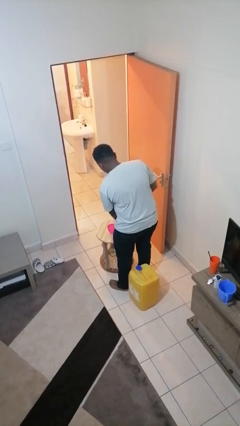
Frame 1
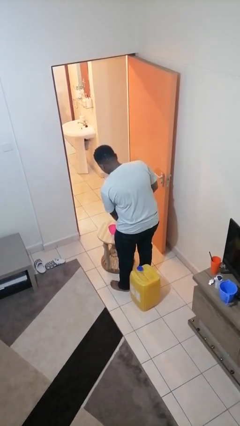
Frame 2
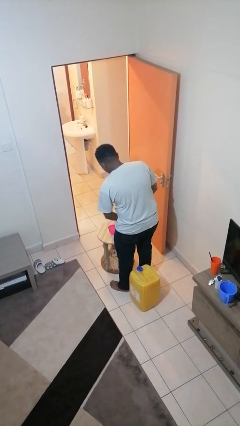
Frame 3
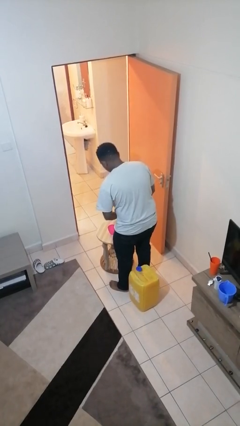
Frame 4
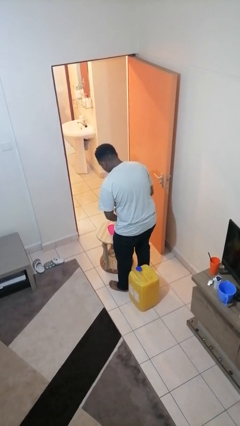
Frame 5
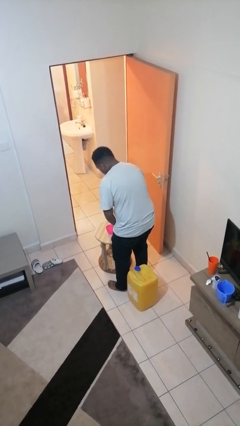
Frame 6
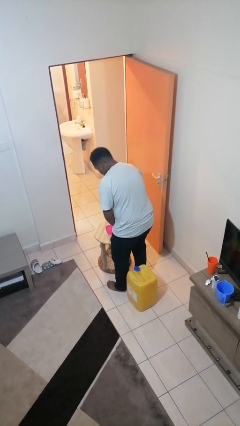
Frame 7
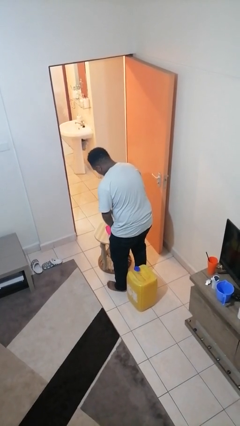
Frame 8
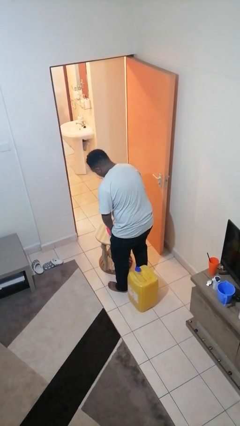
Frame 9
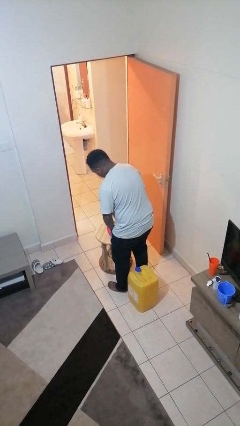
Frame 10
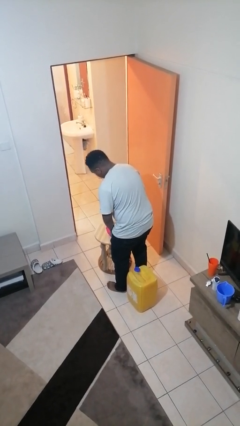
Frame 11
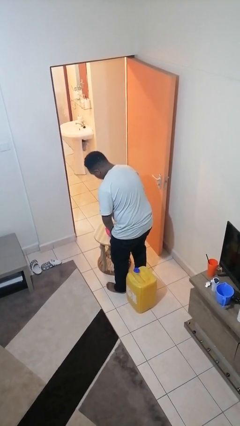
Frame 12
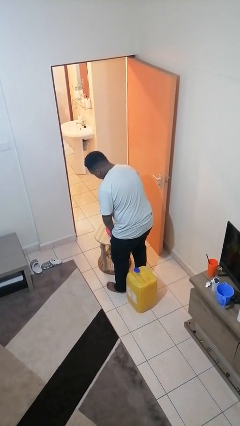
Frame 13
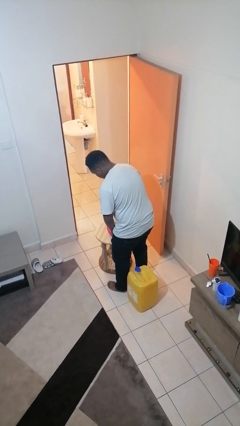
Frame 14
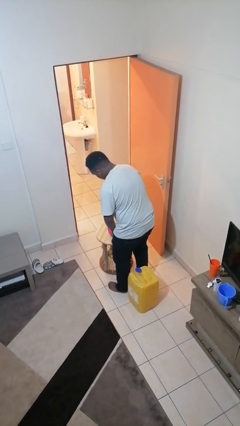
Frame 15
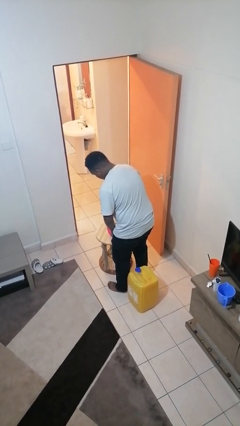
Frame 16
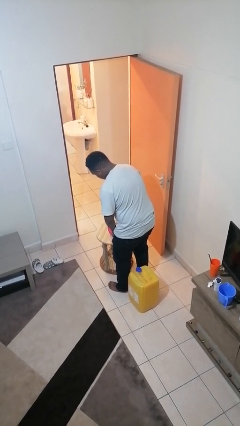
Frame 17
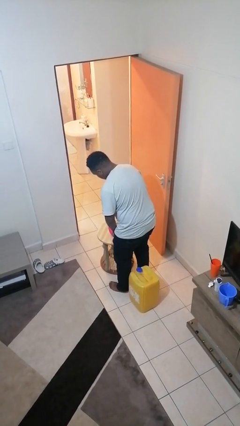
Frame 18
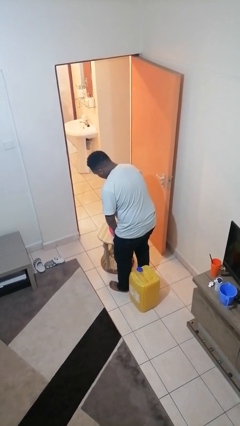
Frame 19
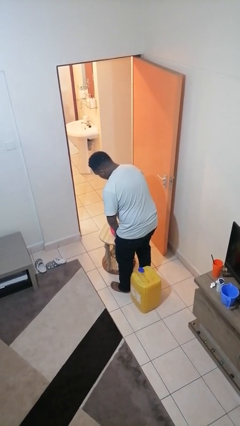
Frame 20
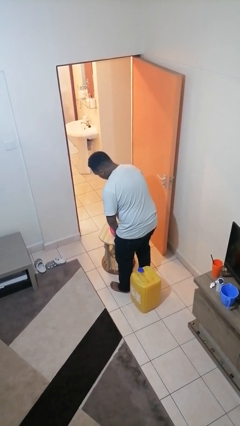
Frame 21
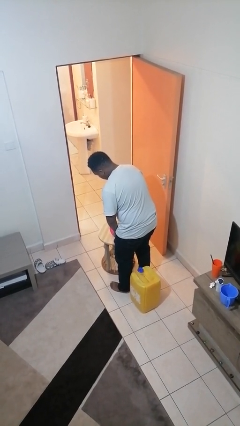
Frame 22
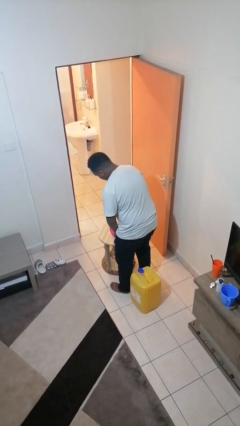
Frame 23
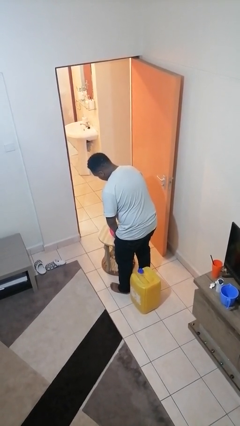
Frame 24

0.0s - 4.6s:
person pours liquid into cup

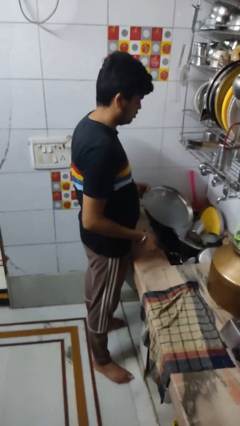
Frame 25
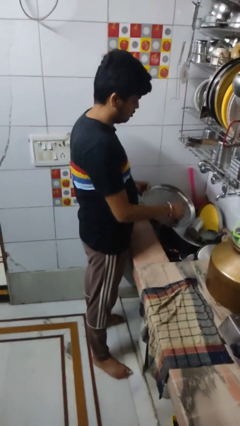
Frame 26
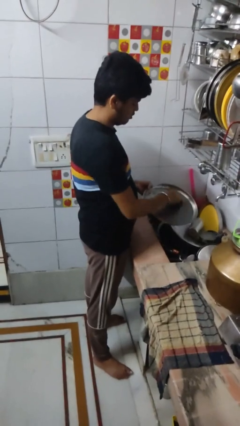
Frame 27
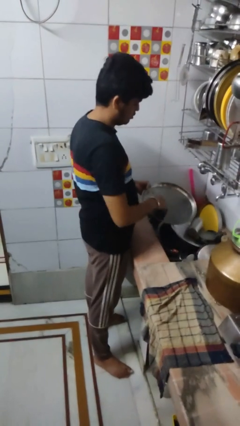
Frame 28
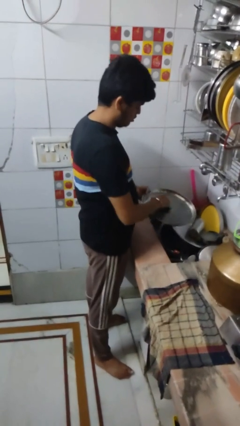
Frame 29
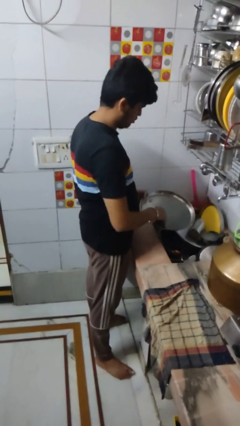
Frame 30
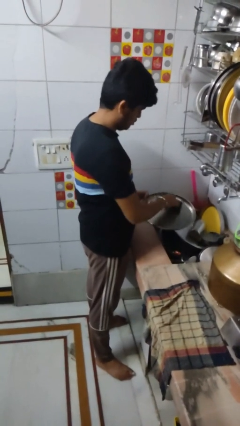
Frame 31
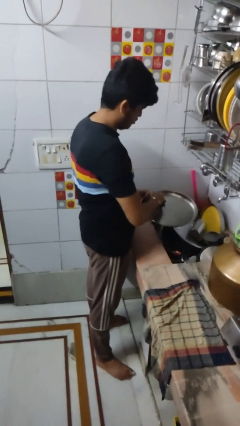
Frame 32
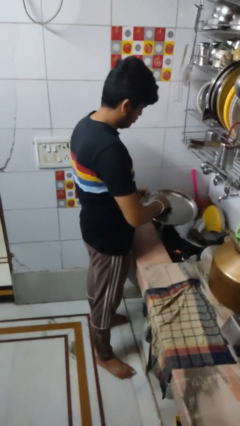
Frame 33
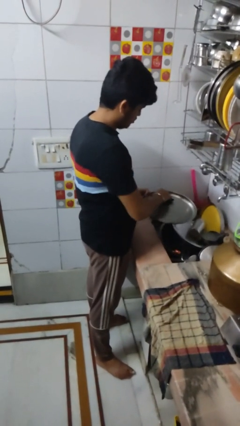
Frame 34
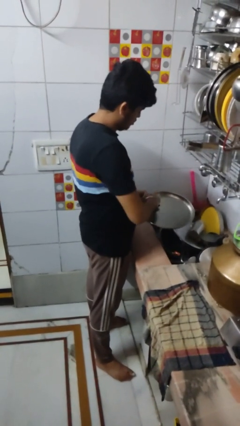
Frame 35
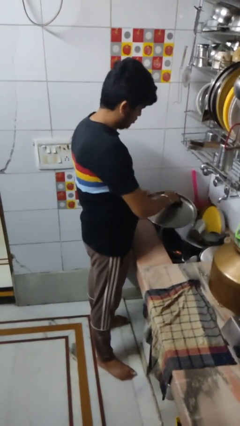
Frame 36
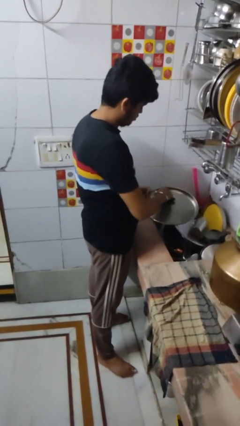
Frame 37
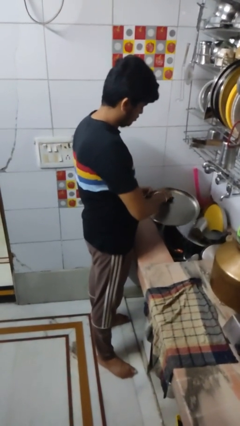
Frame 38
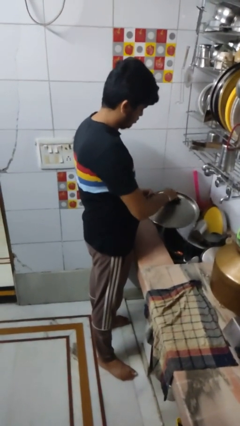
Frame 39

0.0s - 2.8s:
person washes dish

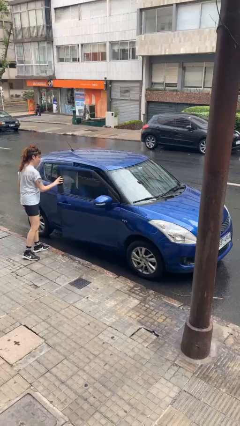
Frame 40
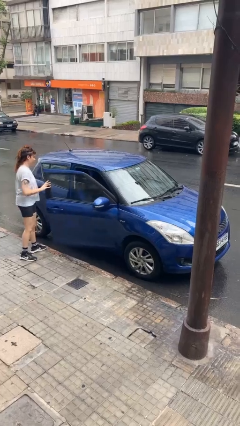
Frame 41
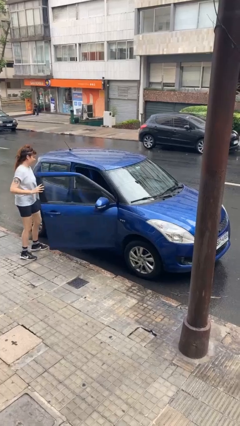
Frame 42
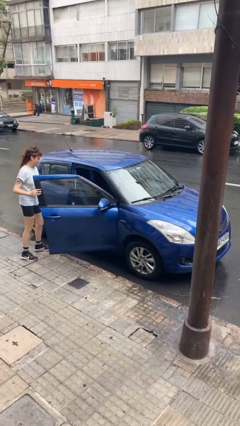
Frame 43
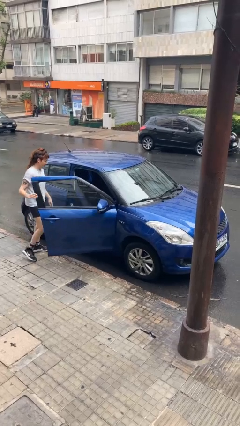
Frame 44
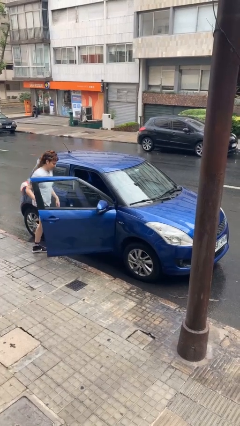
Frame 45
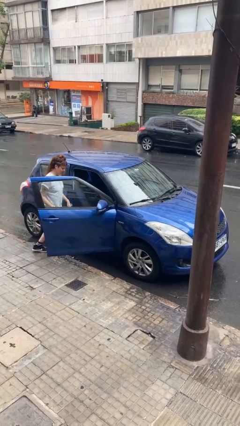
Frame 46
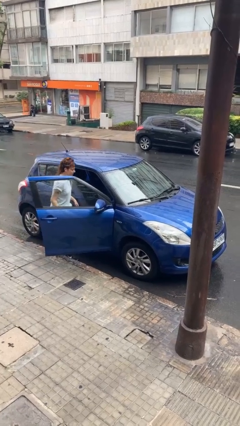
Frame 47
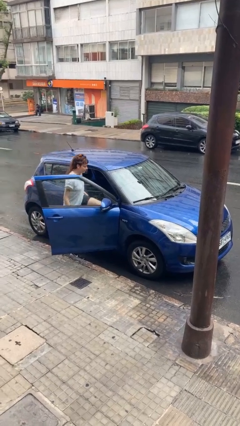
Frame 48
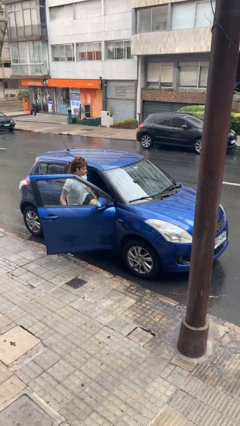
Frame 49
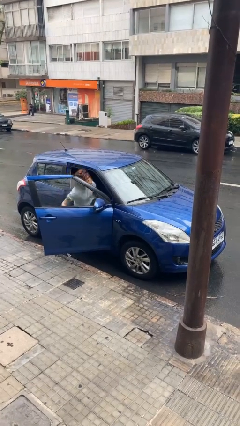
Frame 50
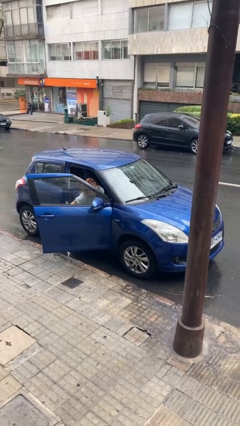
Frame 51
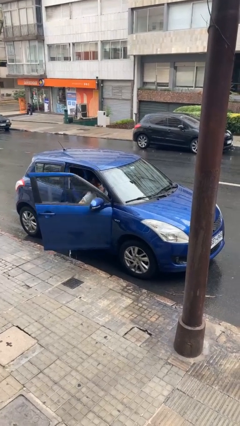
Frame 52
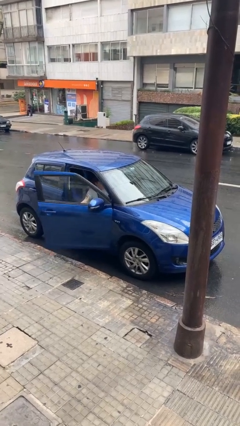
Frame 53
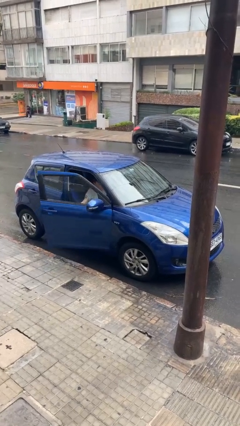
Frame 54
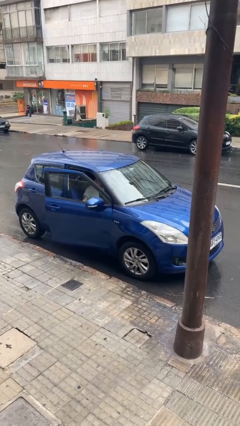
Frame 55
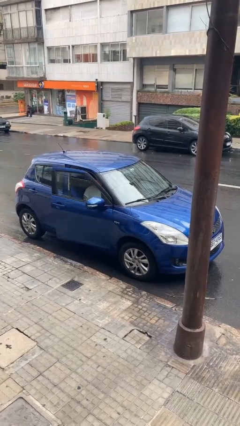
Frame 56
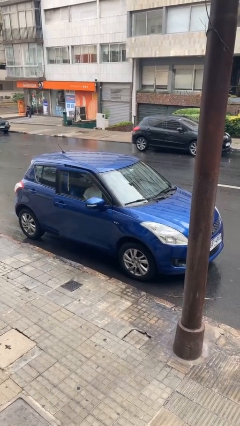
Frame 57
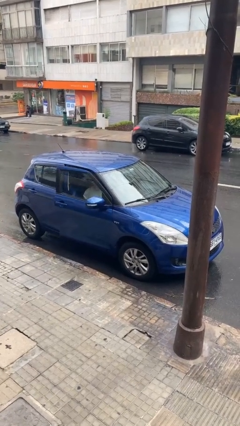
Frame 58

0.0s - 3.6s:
car picks up person

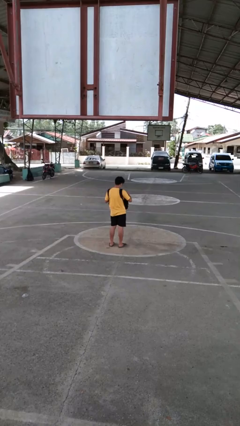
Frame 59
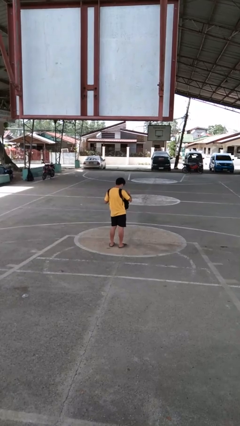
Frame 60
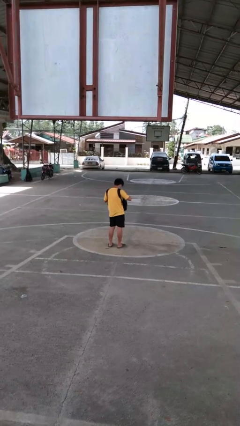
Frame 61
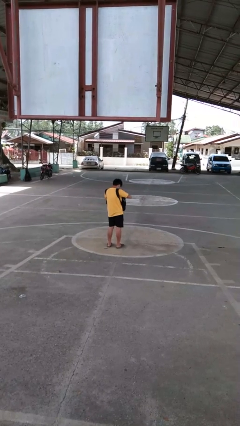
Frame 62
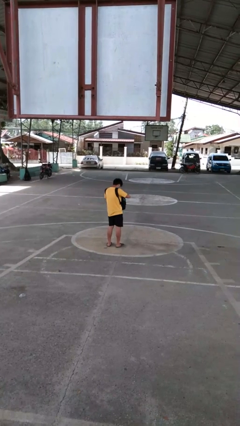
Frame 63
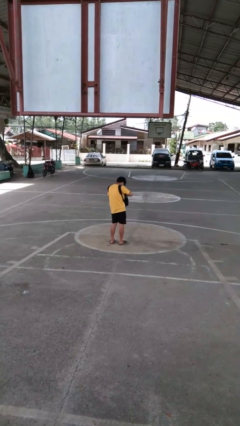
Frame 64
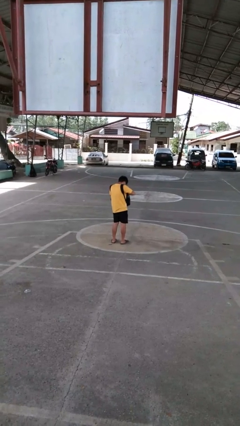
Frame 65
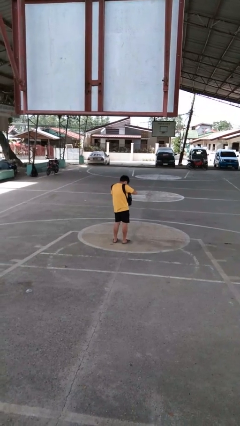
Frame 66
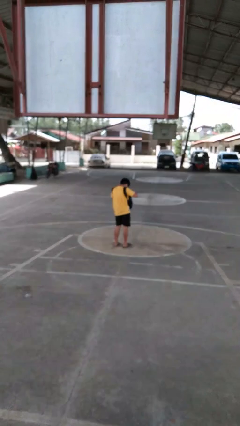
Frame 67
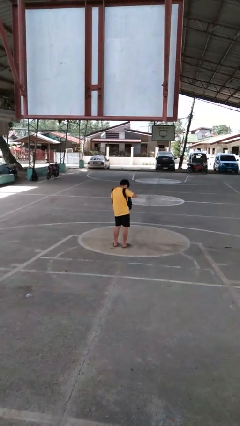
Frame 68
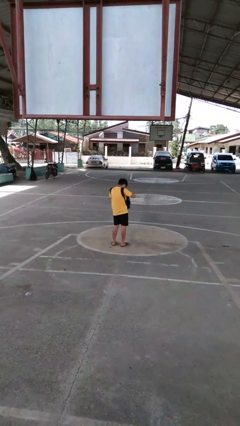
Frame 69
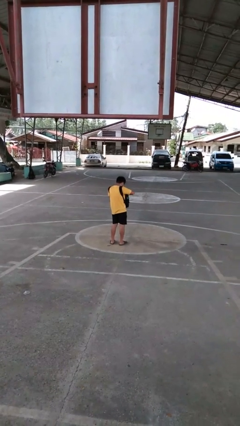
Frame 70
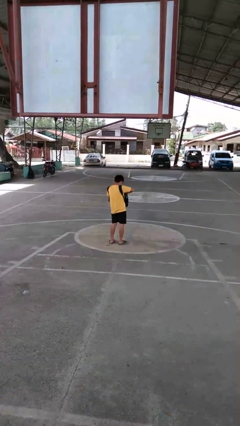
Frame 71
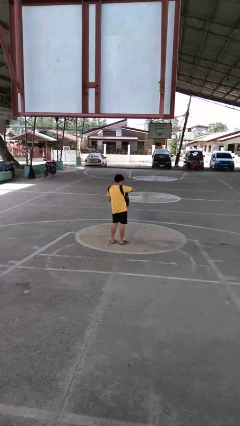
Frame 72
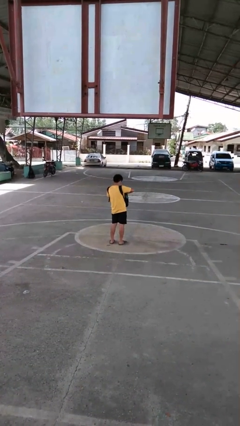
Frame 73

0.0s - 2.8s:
person searches in purse

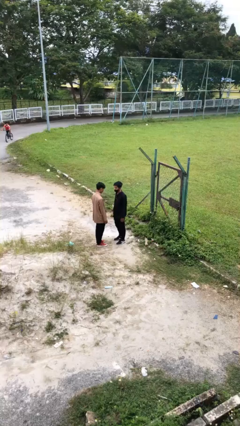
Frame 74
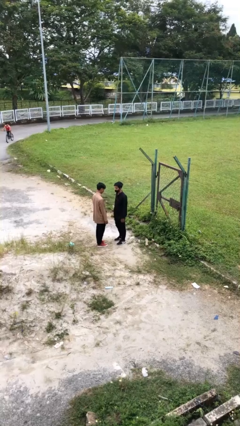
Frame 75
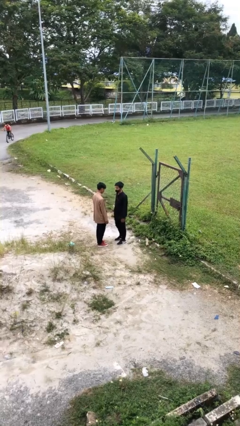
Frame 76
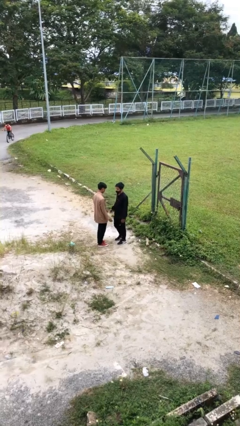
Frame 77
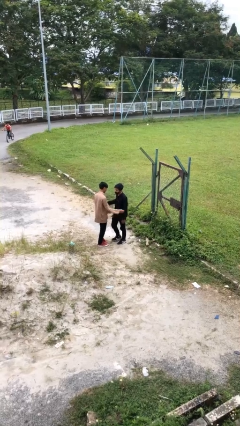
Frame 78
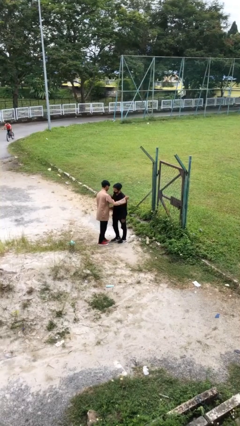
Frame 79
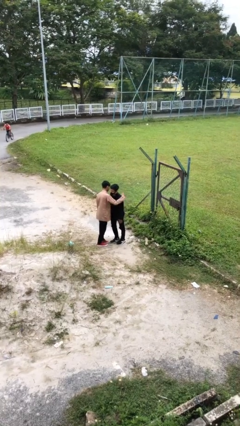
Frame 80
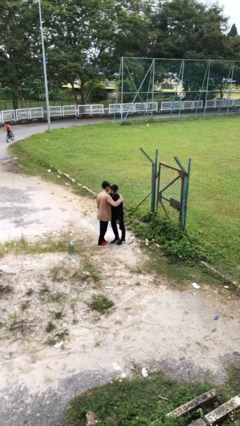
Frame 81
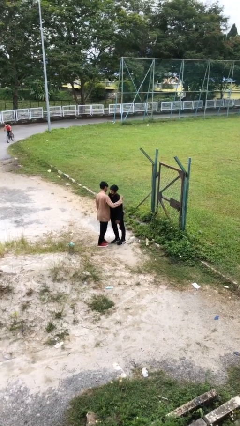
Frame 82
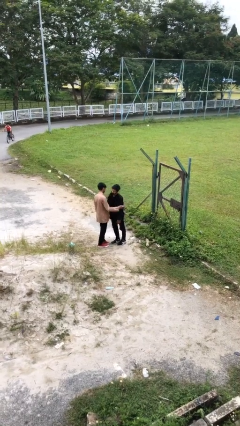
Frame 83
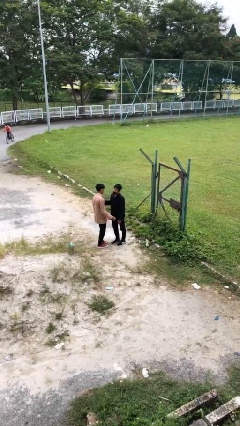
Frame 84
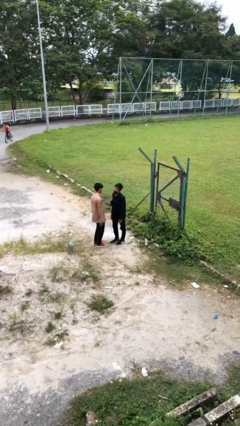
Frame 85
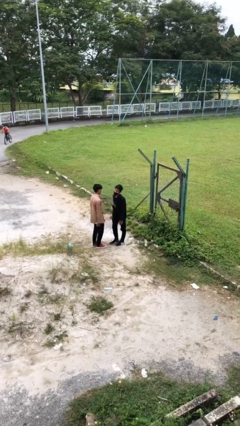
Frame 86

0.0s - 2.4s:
person embraces person

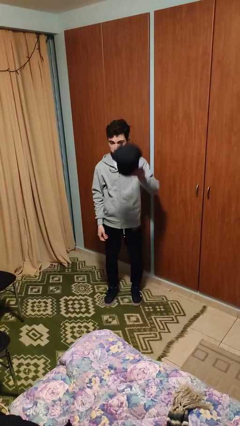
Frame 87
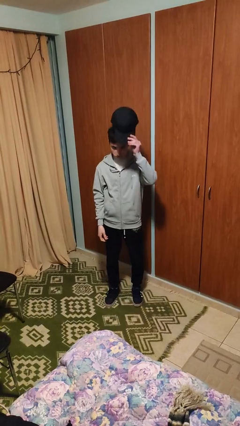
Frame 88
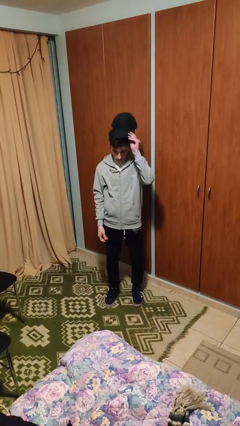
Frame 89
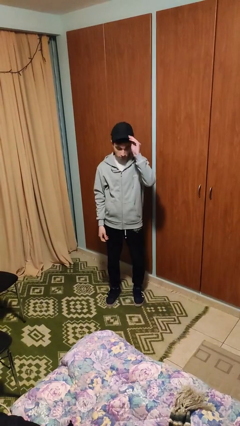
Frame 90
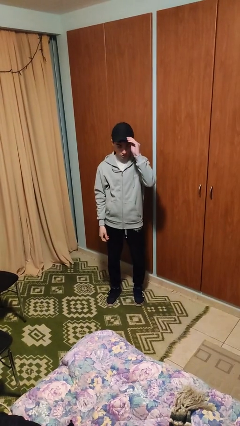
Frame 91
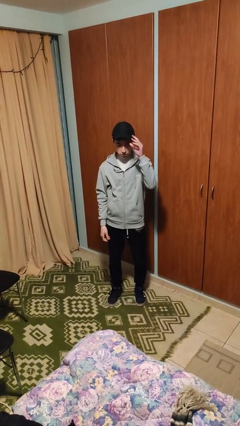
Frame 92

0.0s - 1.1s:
person puts on hat
